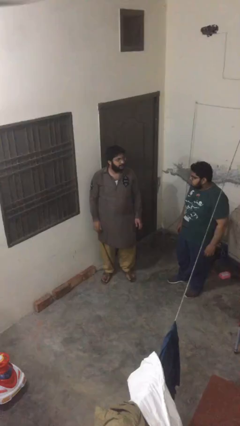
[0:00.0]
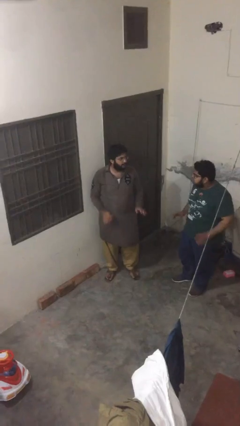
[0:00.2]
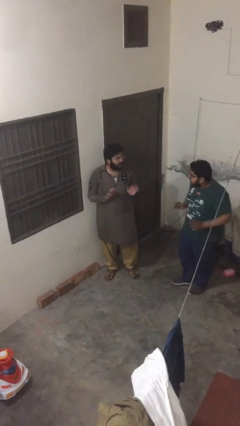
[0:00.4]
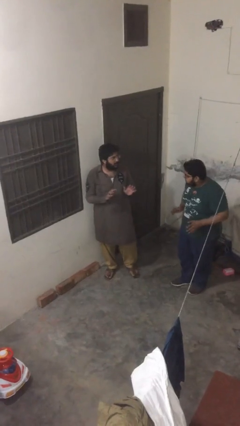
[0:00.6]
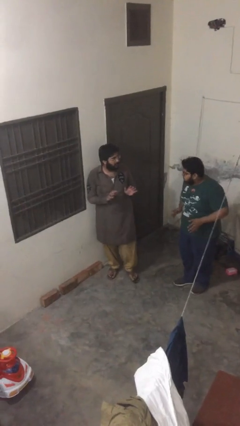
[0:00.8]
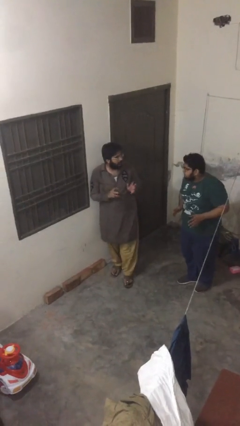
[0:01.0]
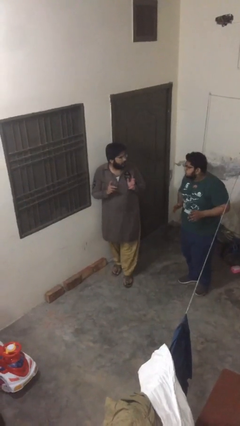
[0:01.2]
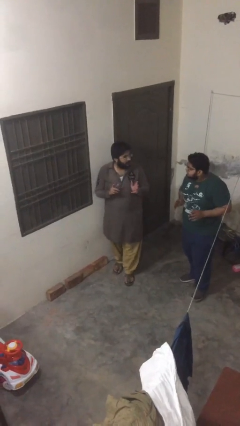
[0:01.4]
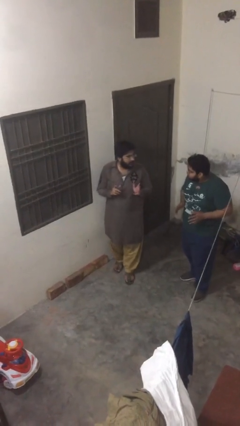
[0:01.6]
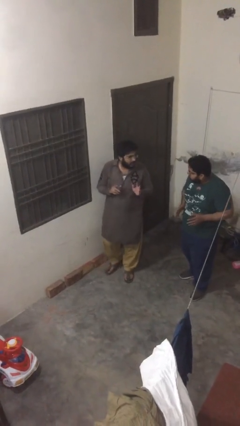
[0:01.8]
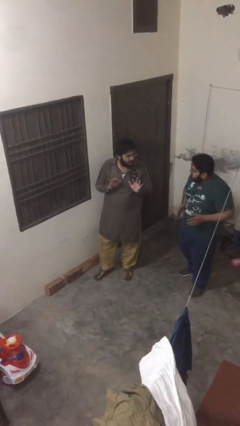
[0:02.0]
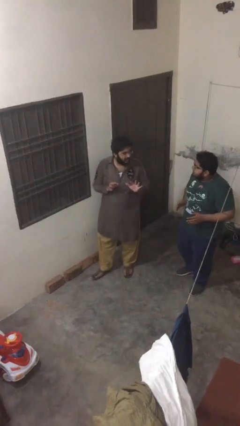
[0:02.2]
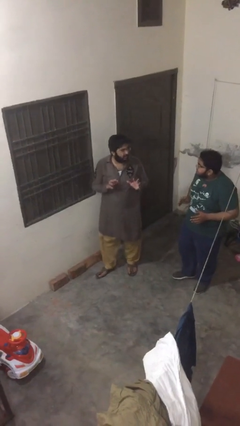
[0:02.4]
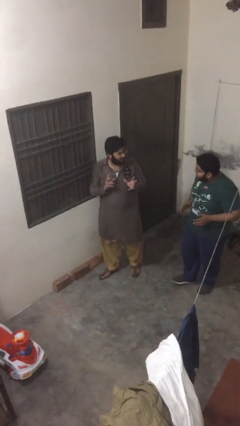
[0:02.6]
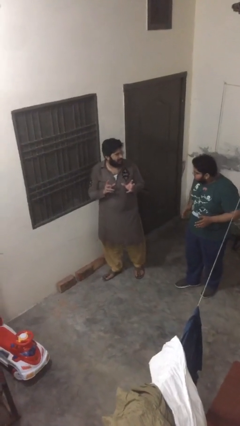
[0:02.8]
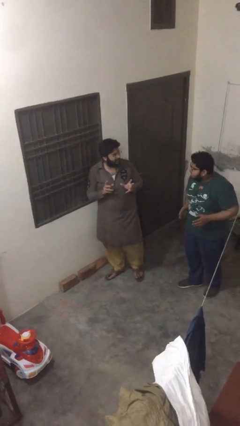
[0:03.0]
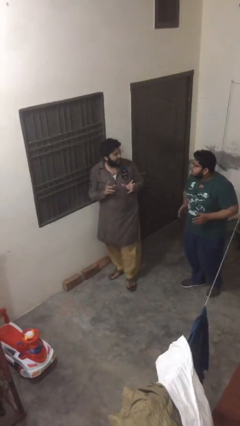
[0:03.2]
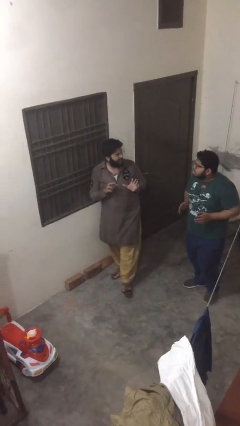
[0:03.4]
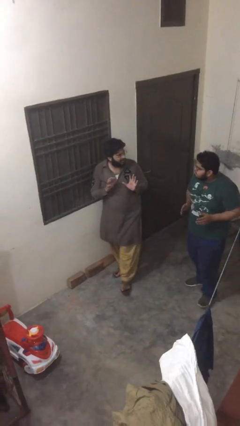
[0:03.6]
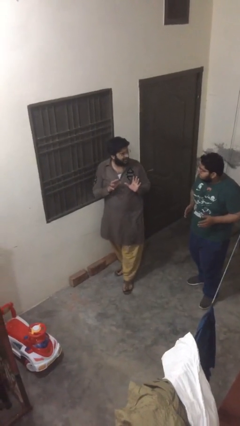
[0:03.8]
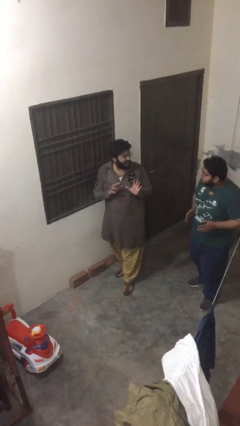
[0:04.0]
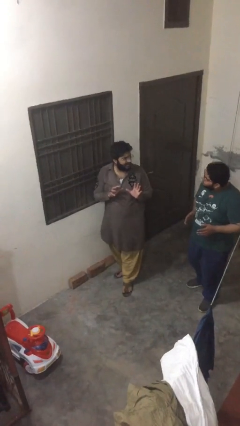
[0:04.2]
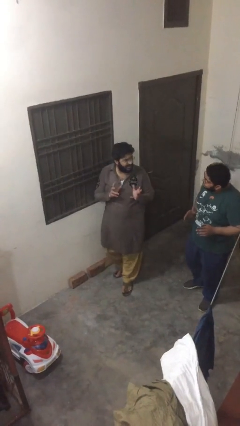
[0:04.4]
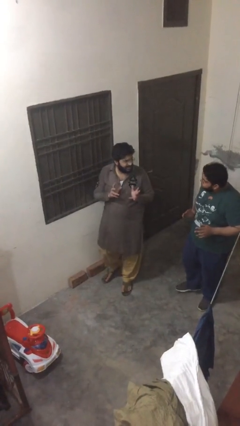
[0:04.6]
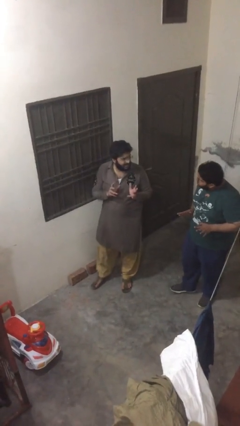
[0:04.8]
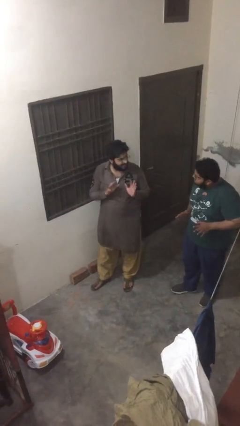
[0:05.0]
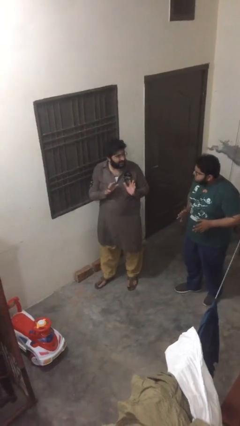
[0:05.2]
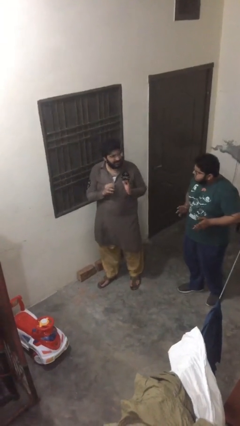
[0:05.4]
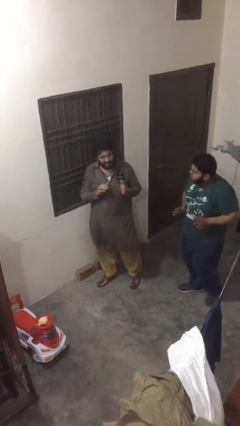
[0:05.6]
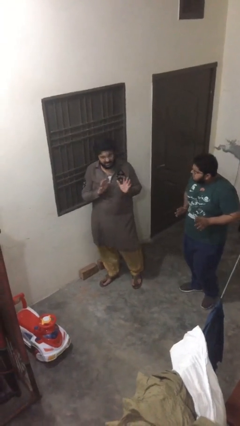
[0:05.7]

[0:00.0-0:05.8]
person talks to person

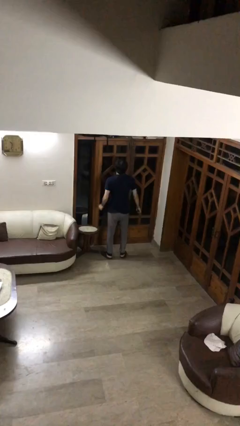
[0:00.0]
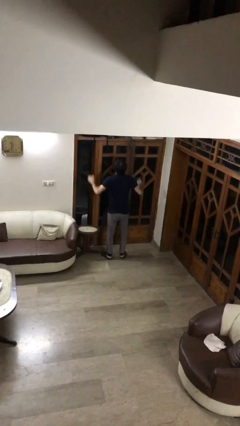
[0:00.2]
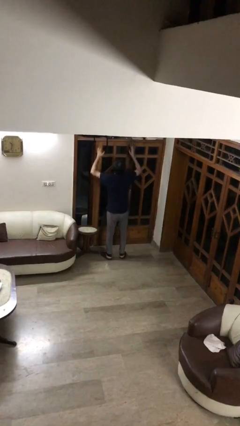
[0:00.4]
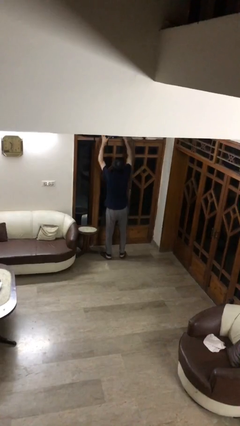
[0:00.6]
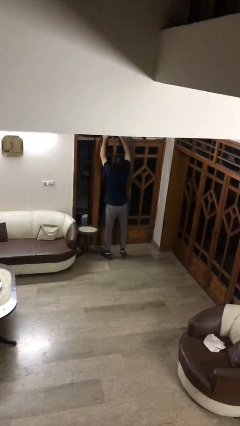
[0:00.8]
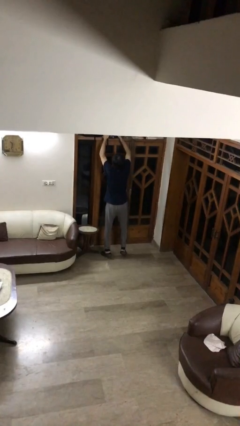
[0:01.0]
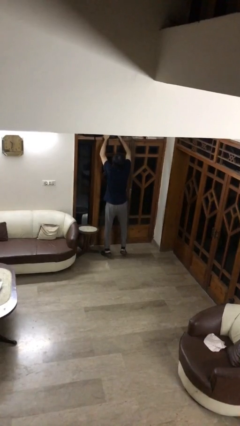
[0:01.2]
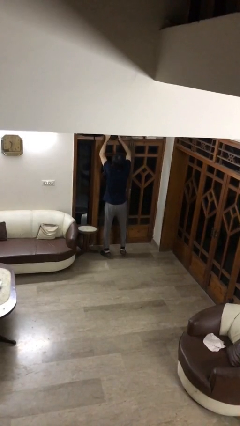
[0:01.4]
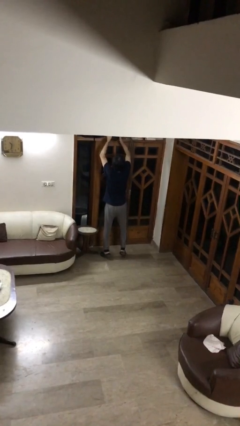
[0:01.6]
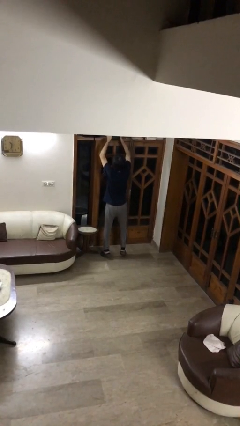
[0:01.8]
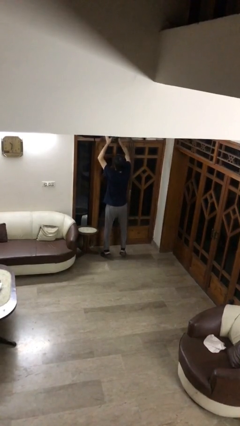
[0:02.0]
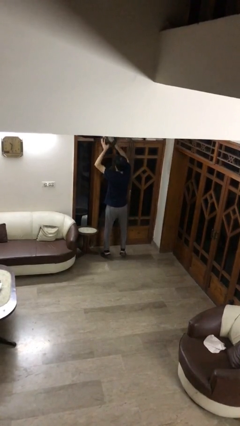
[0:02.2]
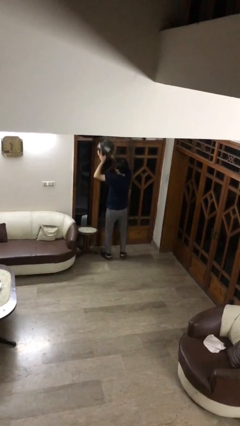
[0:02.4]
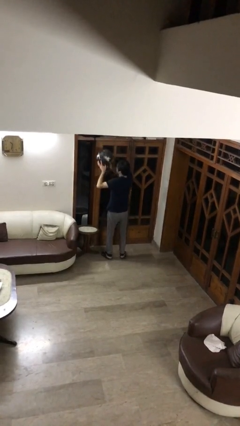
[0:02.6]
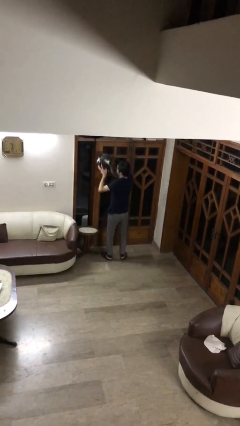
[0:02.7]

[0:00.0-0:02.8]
person picks up object from shelf

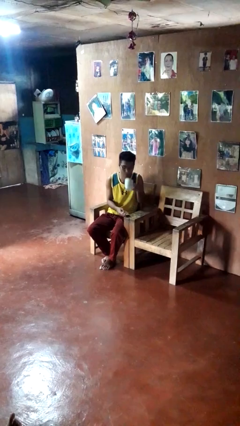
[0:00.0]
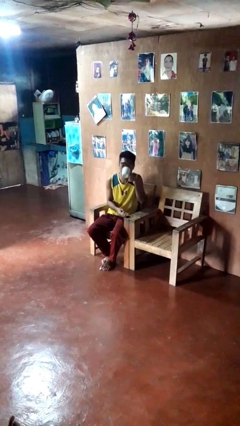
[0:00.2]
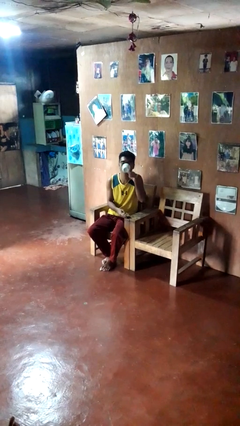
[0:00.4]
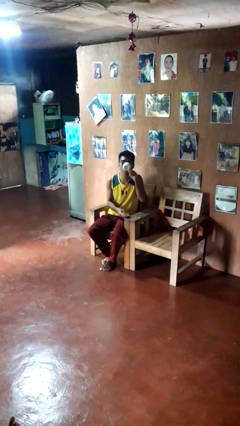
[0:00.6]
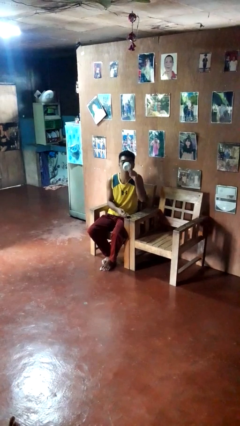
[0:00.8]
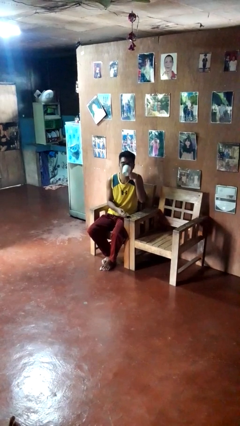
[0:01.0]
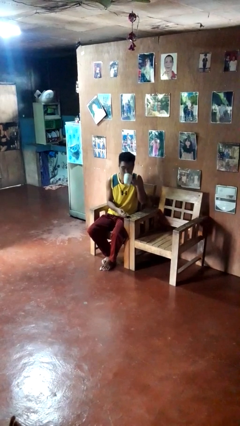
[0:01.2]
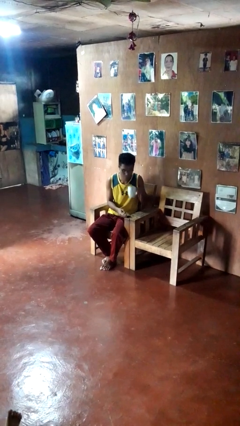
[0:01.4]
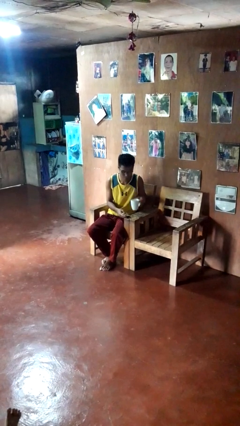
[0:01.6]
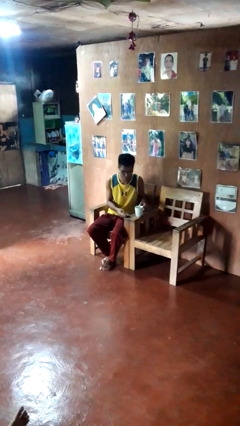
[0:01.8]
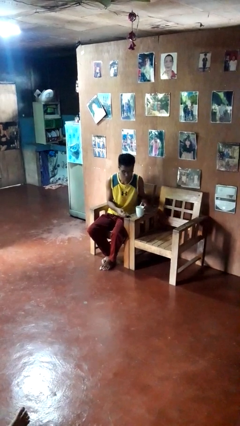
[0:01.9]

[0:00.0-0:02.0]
person drinks from cup

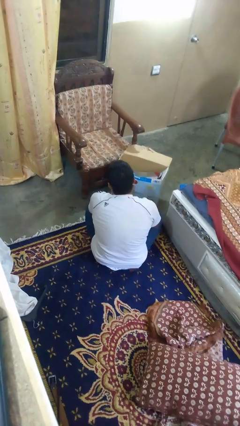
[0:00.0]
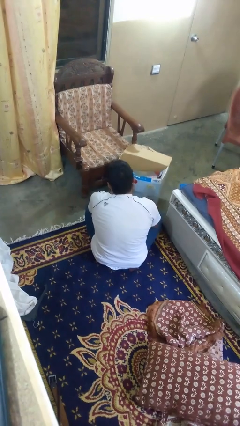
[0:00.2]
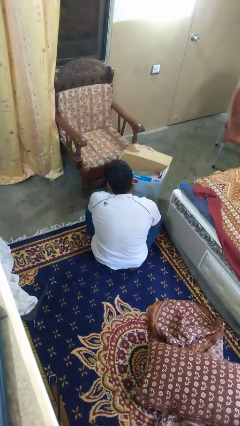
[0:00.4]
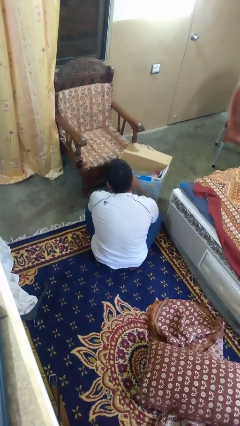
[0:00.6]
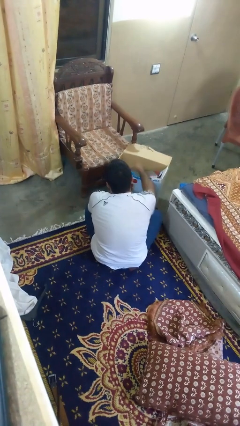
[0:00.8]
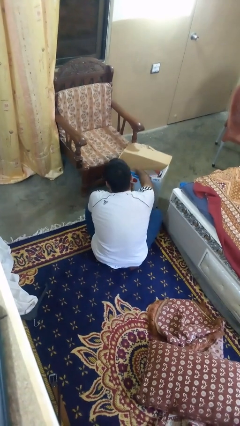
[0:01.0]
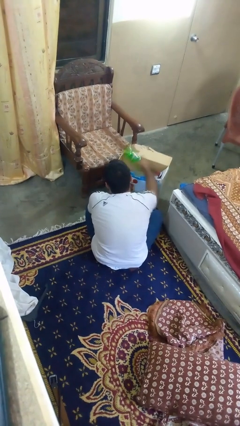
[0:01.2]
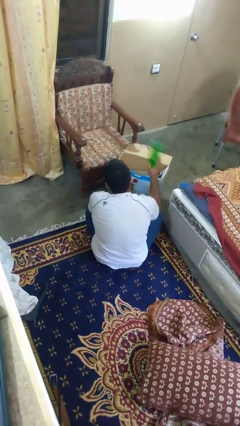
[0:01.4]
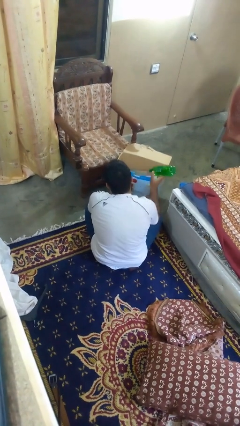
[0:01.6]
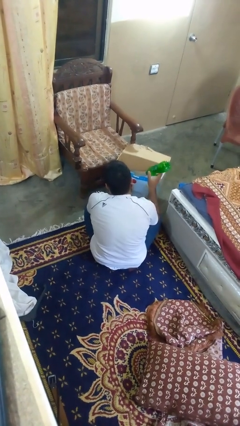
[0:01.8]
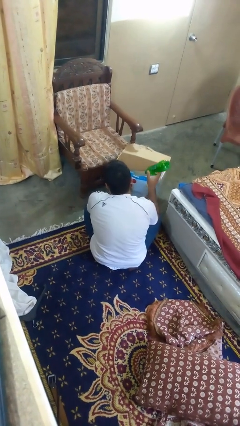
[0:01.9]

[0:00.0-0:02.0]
person takes object from box

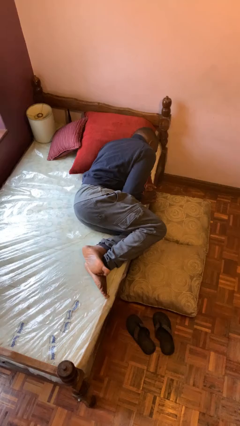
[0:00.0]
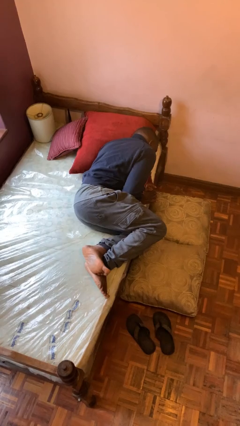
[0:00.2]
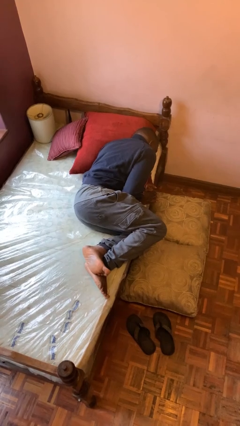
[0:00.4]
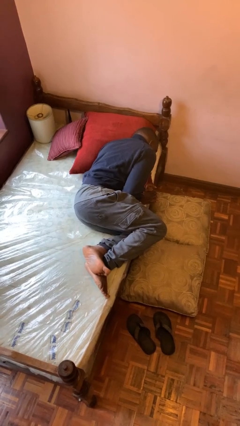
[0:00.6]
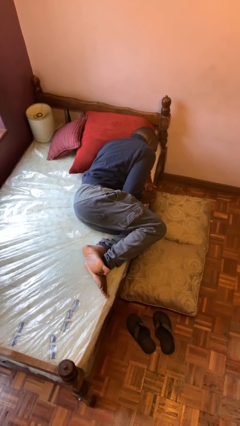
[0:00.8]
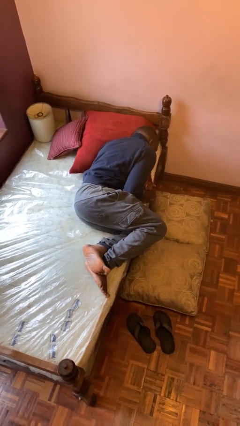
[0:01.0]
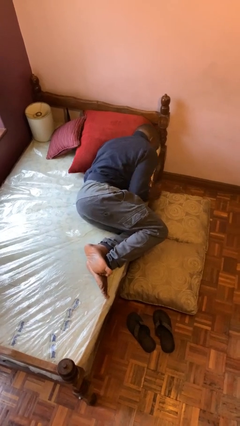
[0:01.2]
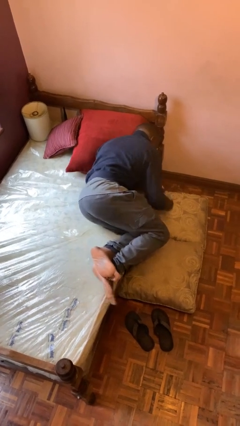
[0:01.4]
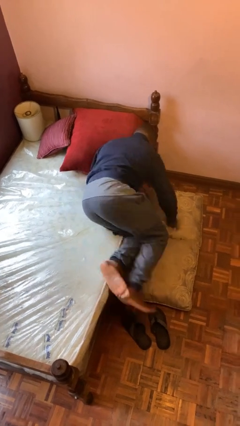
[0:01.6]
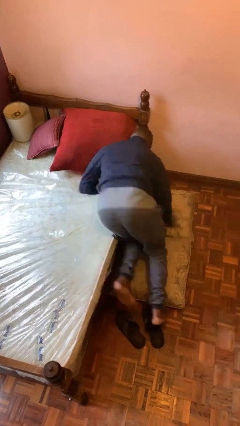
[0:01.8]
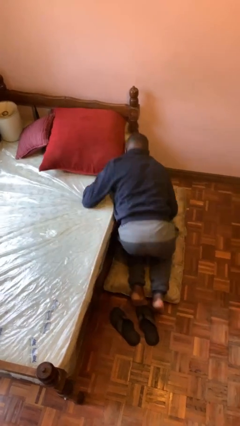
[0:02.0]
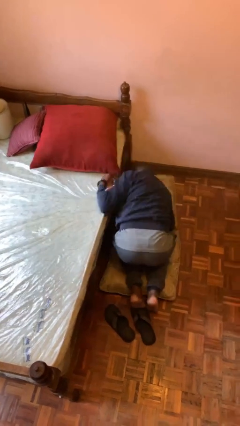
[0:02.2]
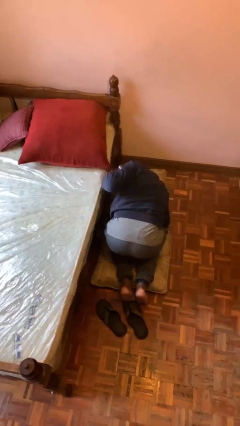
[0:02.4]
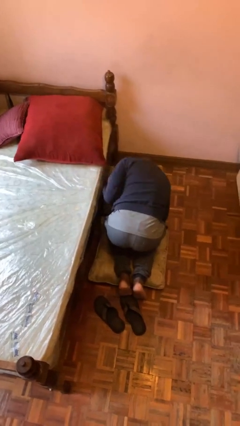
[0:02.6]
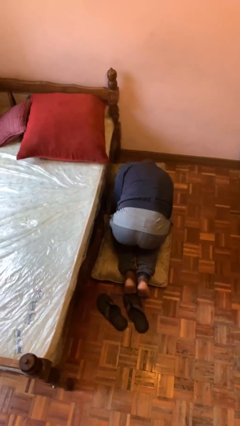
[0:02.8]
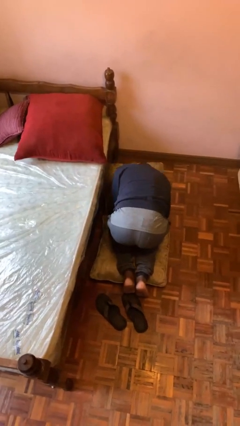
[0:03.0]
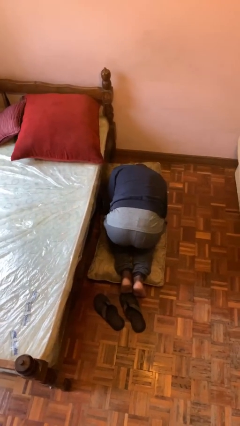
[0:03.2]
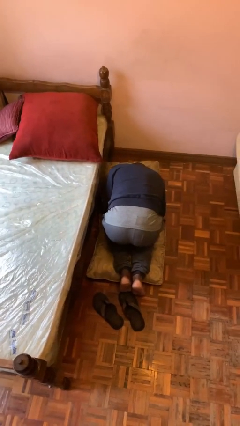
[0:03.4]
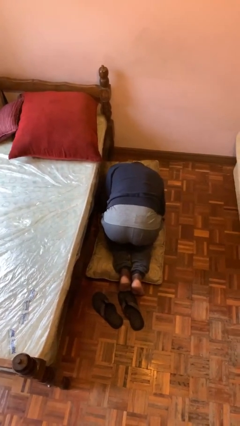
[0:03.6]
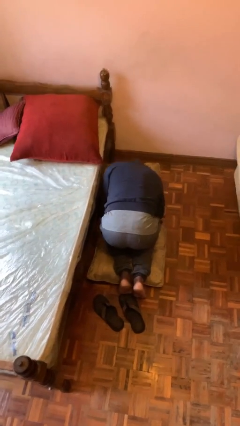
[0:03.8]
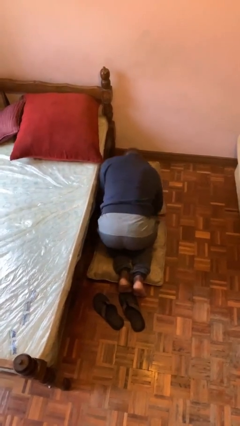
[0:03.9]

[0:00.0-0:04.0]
person falls from bed

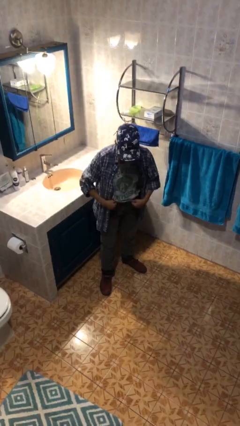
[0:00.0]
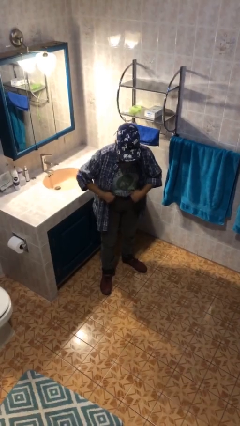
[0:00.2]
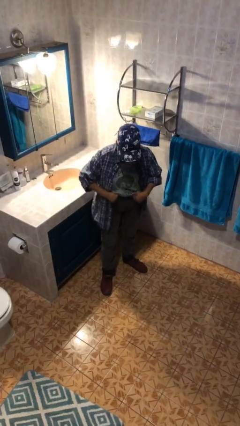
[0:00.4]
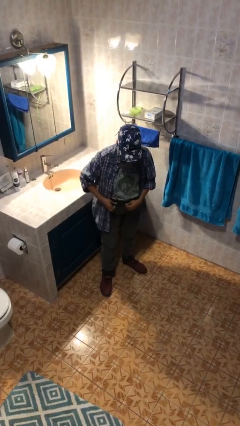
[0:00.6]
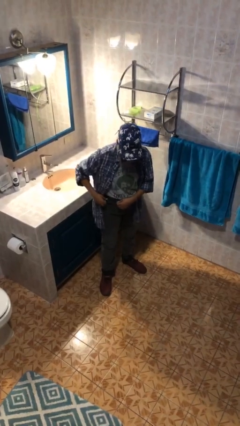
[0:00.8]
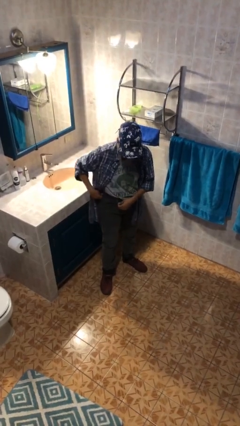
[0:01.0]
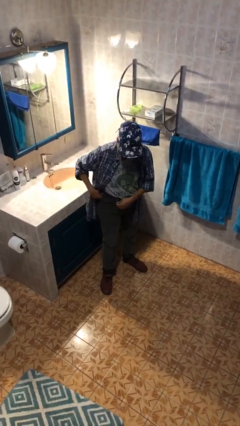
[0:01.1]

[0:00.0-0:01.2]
person hikes up pants
